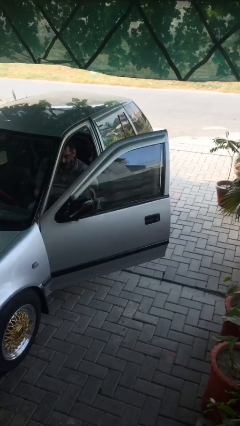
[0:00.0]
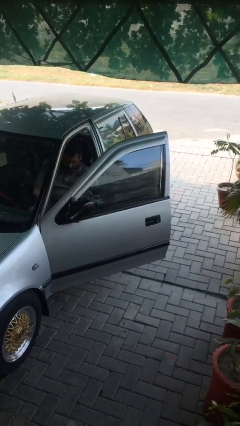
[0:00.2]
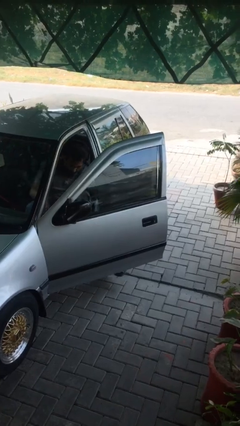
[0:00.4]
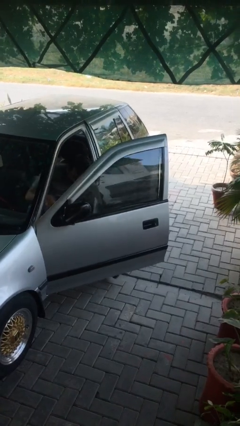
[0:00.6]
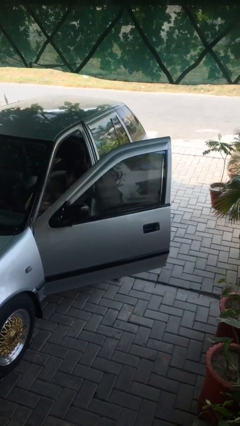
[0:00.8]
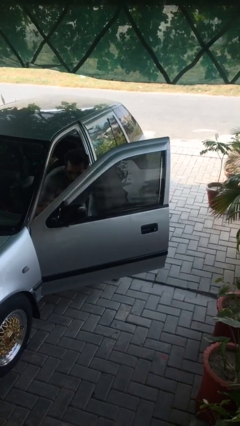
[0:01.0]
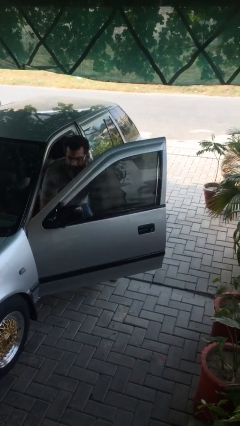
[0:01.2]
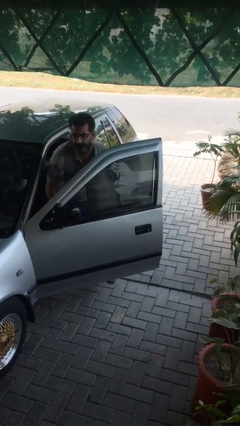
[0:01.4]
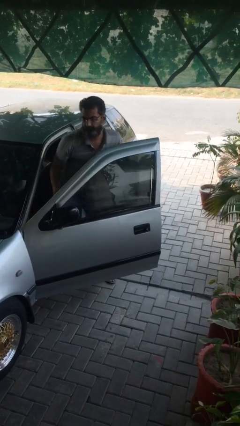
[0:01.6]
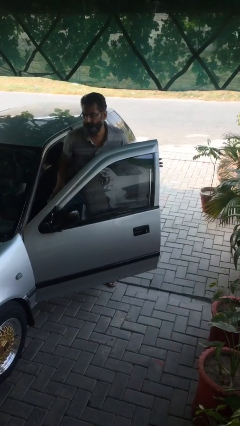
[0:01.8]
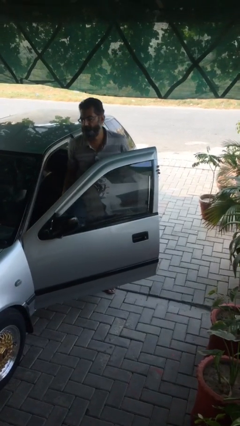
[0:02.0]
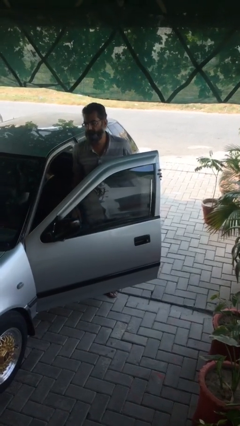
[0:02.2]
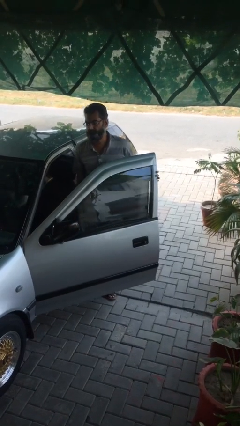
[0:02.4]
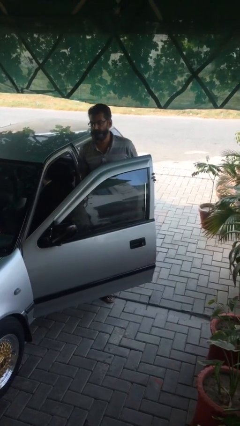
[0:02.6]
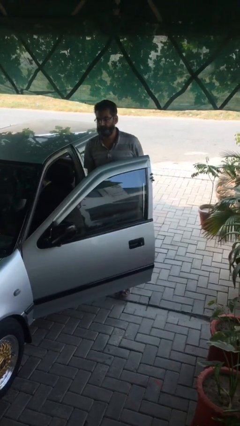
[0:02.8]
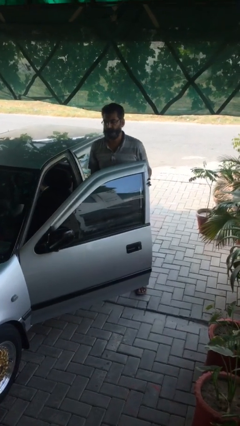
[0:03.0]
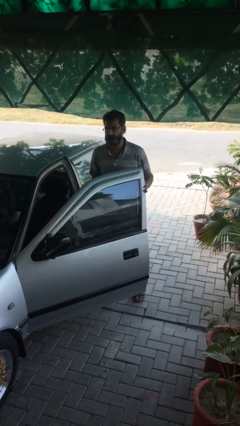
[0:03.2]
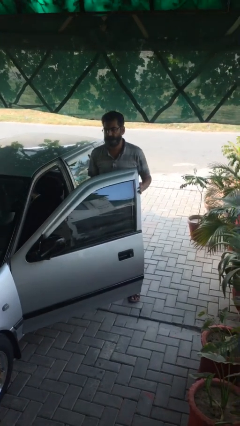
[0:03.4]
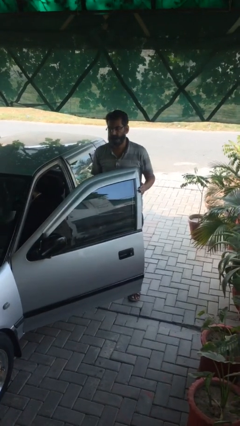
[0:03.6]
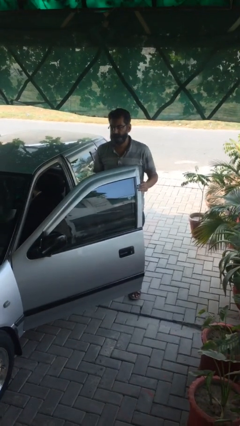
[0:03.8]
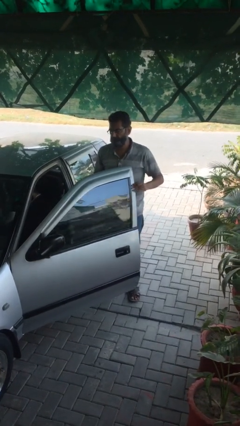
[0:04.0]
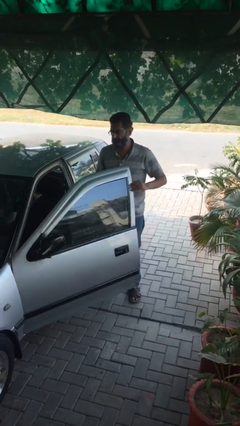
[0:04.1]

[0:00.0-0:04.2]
person exits car

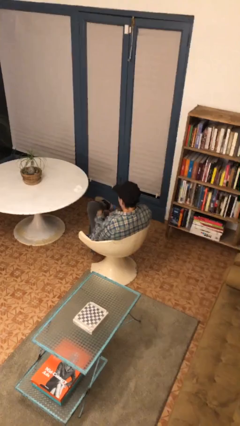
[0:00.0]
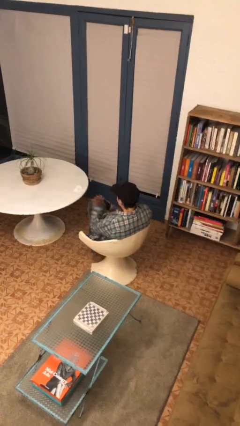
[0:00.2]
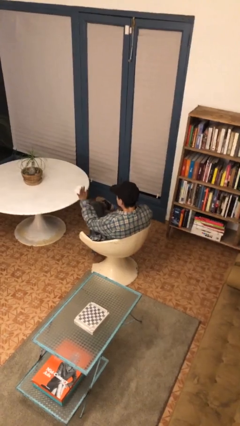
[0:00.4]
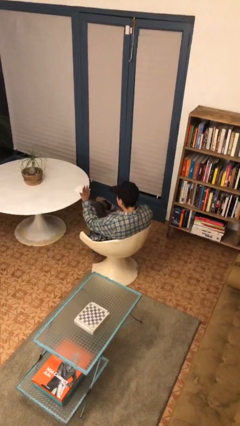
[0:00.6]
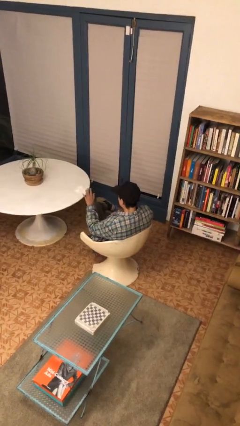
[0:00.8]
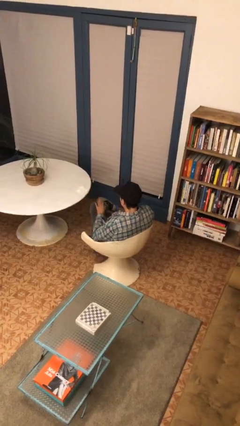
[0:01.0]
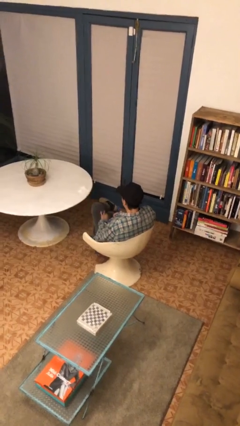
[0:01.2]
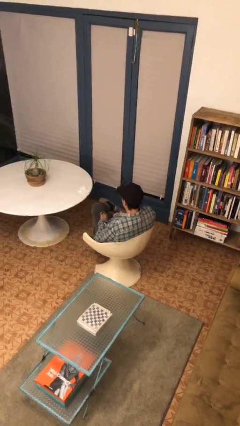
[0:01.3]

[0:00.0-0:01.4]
person gestures stop

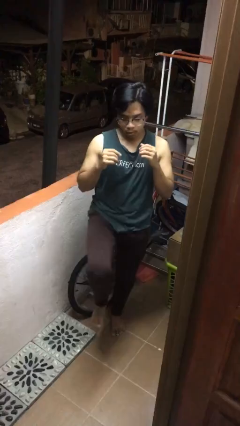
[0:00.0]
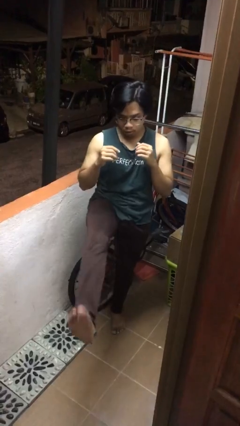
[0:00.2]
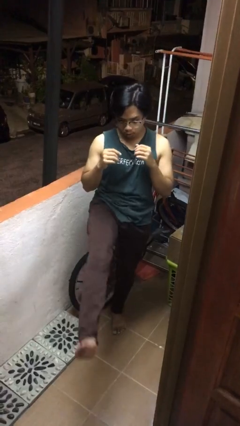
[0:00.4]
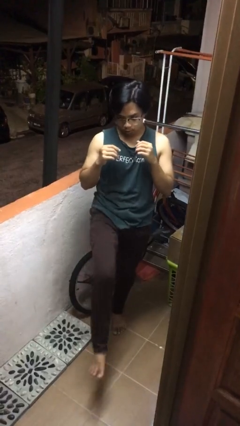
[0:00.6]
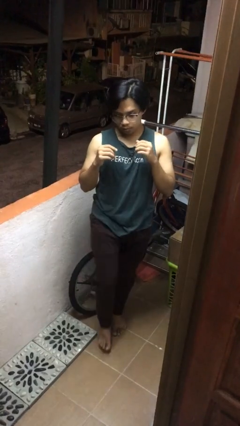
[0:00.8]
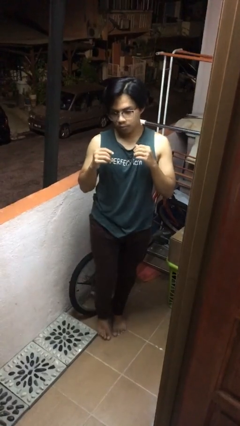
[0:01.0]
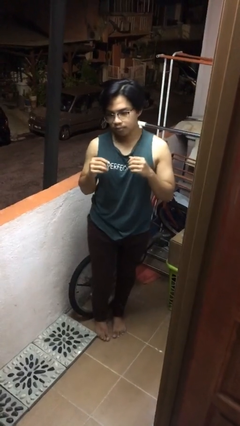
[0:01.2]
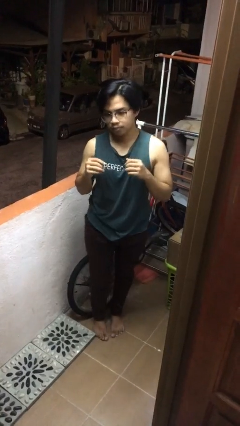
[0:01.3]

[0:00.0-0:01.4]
person karate kicks

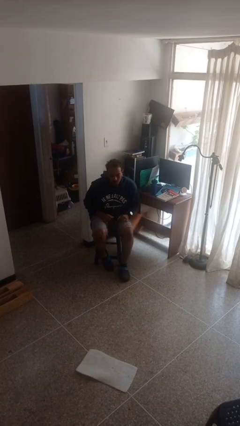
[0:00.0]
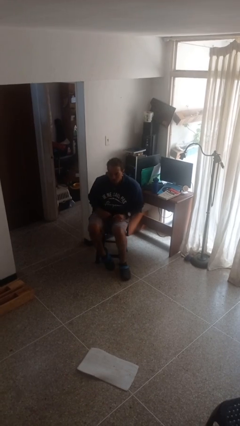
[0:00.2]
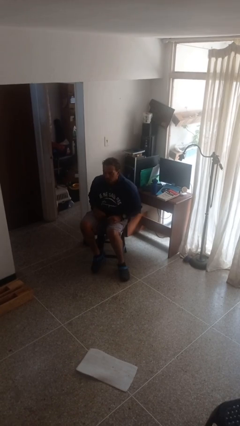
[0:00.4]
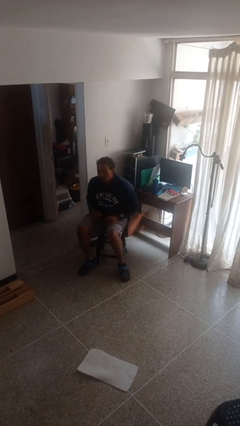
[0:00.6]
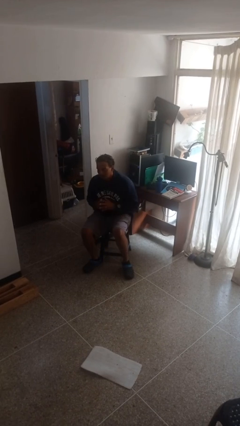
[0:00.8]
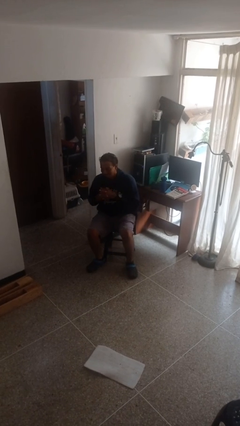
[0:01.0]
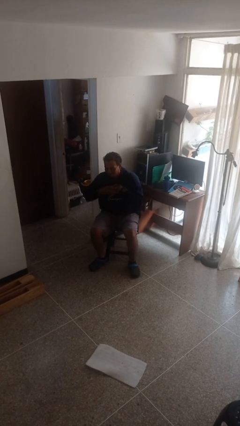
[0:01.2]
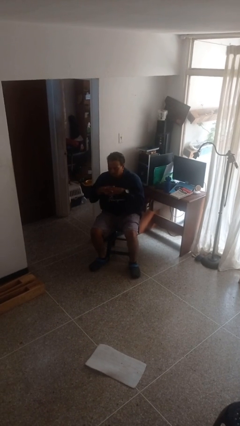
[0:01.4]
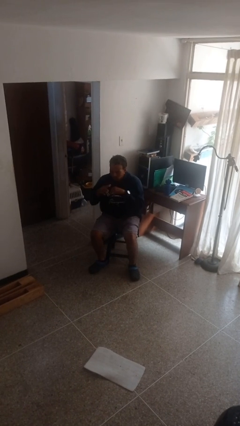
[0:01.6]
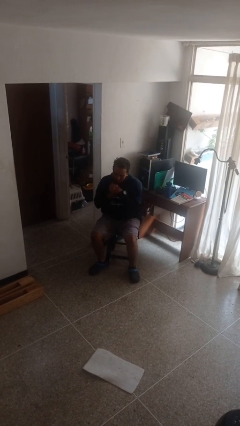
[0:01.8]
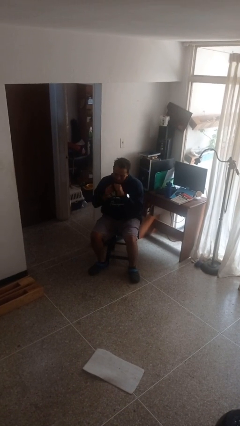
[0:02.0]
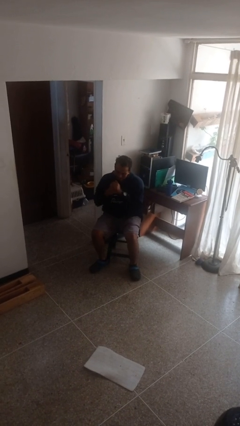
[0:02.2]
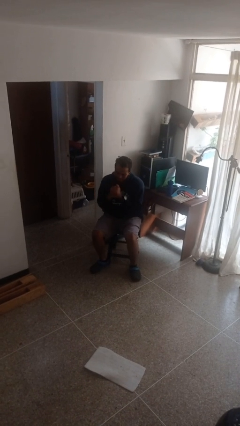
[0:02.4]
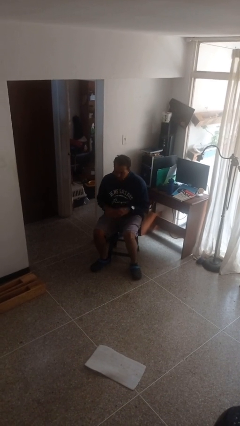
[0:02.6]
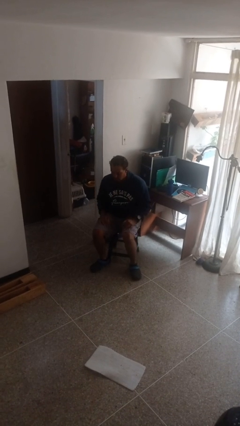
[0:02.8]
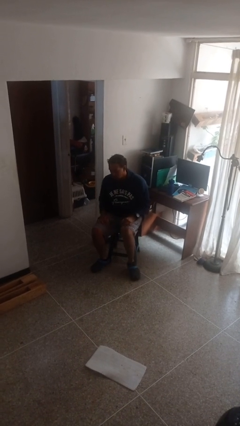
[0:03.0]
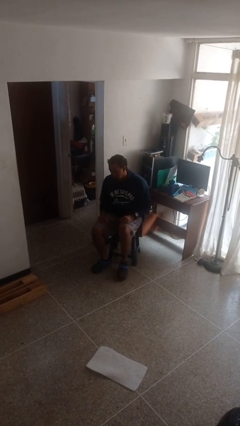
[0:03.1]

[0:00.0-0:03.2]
person cracks knuckles

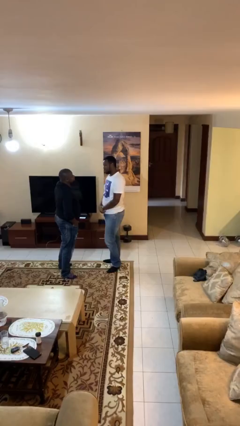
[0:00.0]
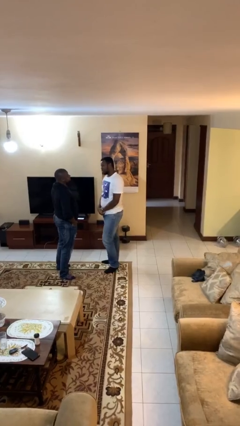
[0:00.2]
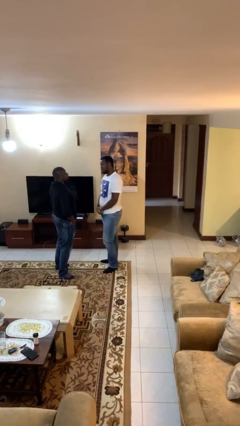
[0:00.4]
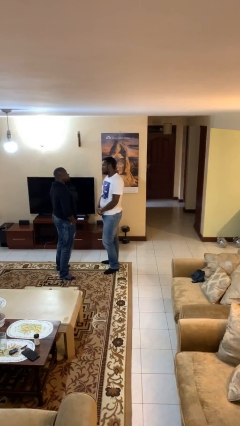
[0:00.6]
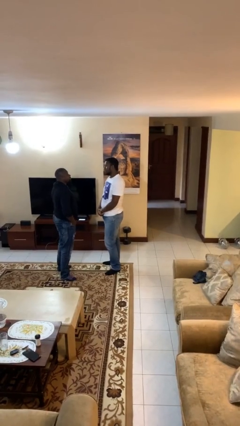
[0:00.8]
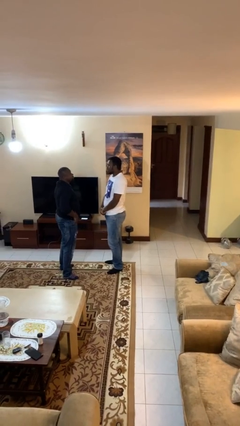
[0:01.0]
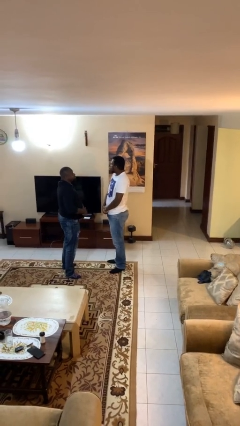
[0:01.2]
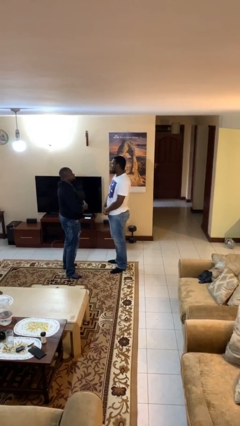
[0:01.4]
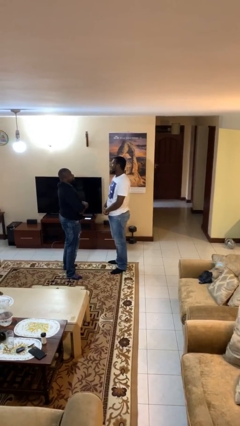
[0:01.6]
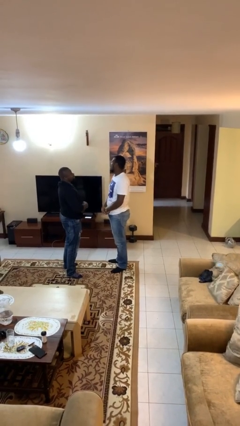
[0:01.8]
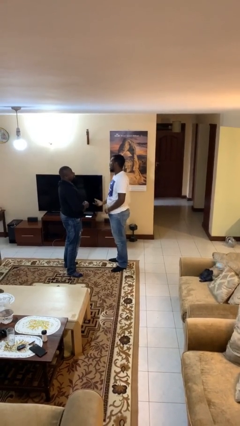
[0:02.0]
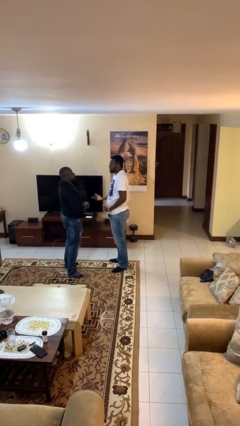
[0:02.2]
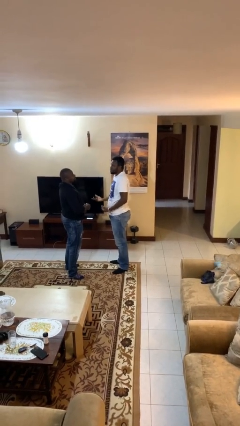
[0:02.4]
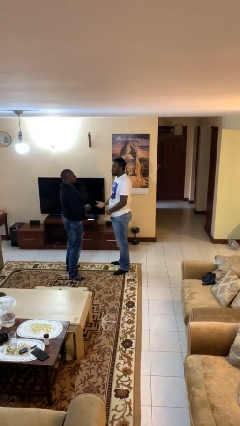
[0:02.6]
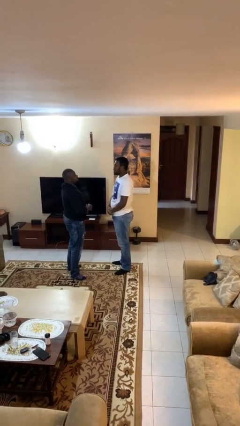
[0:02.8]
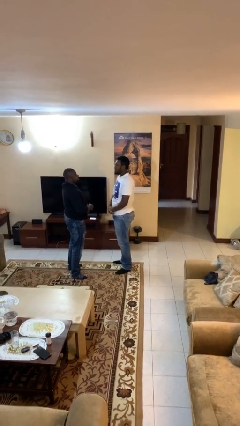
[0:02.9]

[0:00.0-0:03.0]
person talks to person

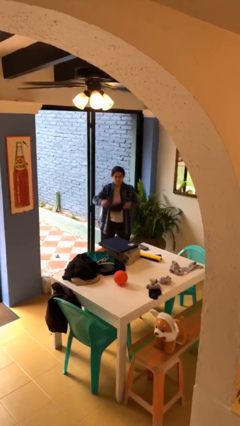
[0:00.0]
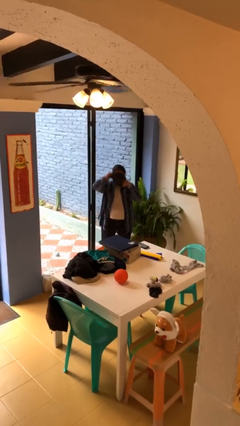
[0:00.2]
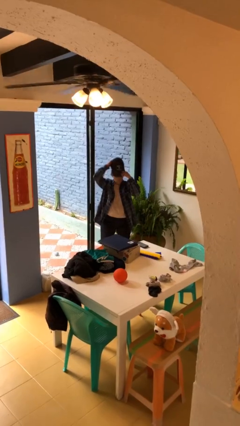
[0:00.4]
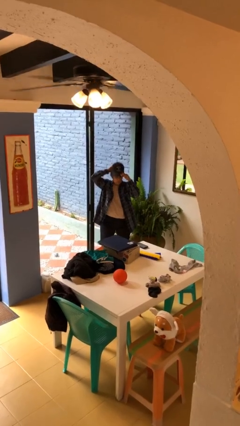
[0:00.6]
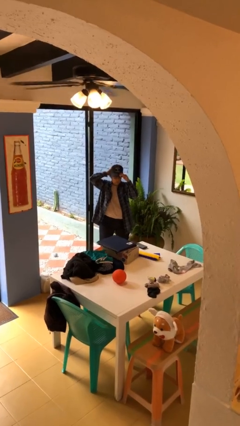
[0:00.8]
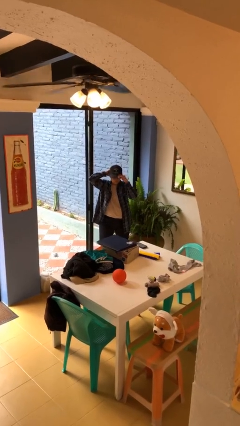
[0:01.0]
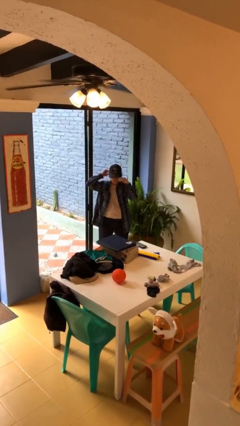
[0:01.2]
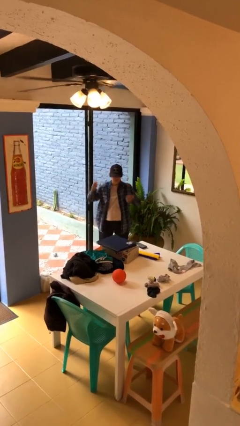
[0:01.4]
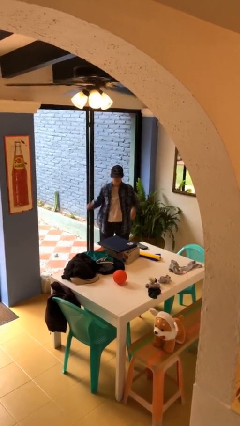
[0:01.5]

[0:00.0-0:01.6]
person puts on hat

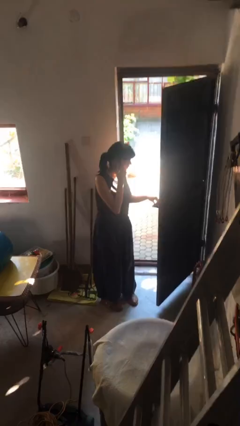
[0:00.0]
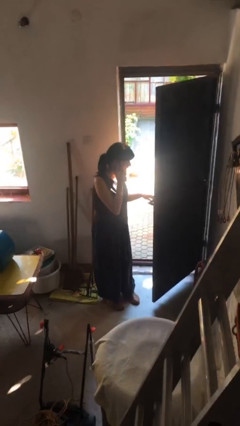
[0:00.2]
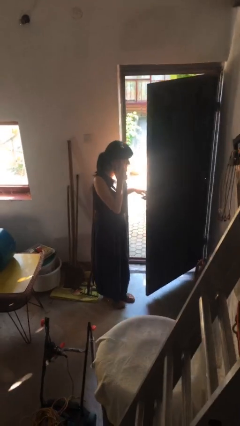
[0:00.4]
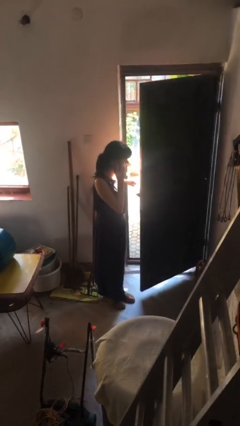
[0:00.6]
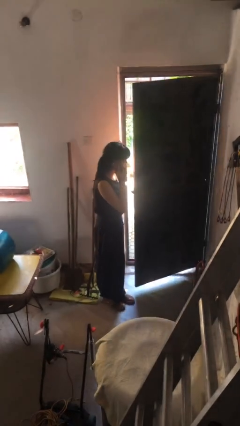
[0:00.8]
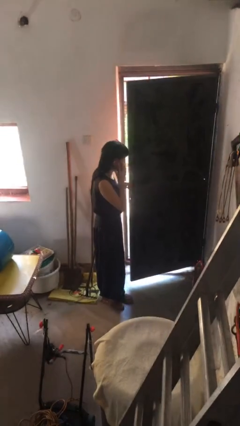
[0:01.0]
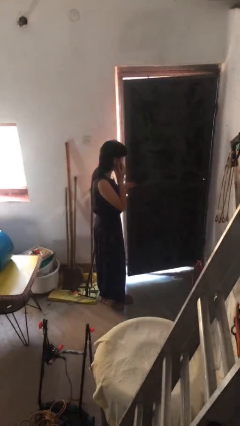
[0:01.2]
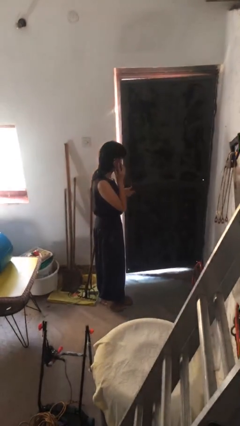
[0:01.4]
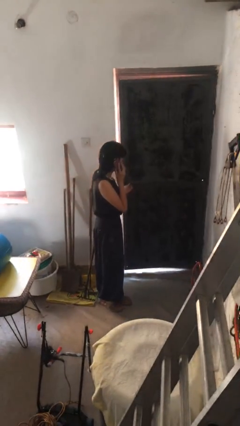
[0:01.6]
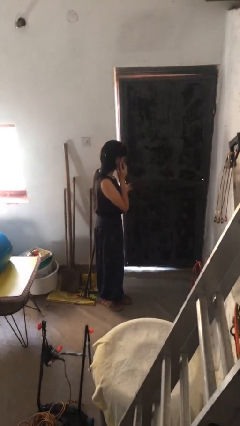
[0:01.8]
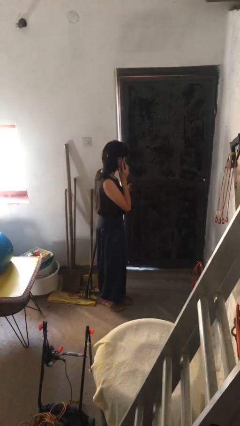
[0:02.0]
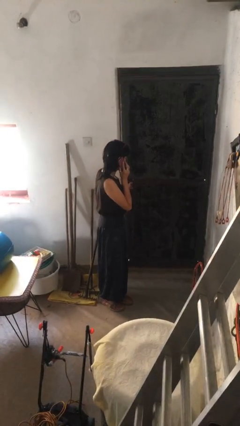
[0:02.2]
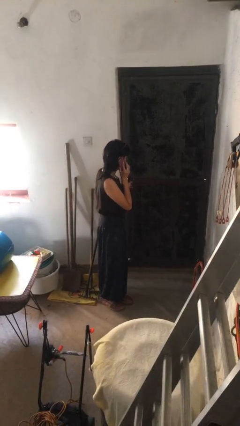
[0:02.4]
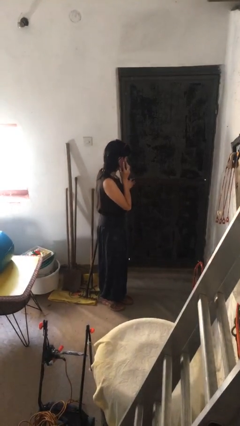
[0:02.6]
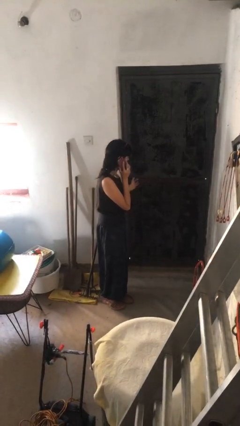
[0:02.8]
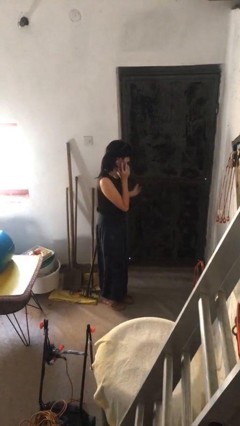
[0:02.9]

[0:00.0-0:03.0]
person closes facility door
